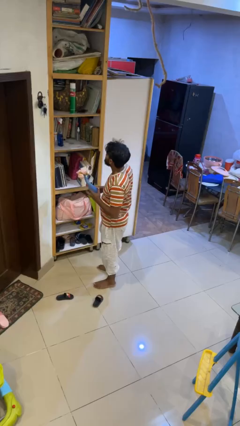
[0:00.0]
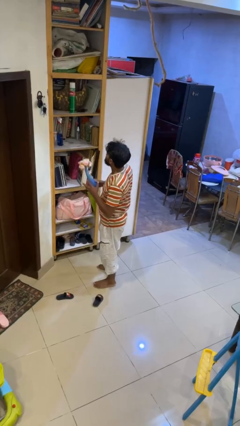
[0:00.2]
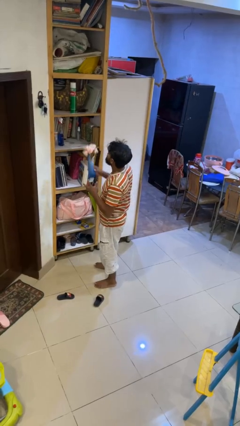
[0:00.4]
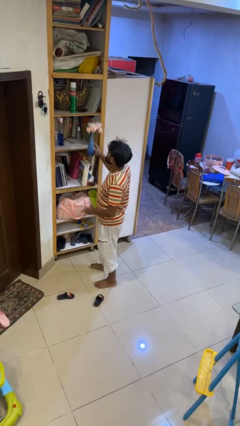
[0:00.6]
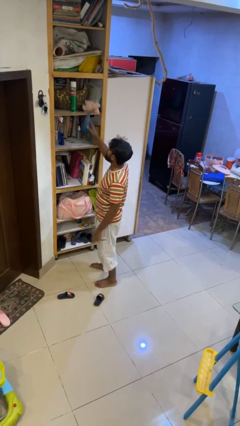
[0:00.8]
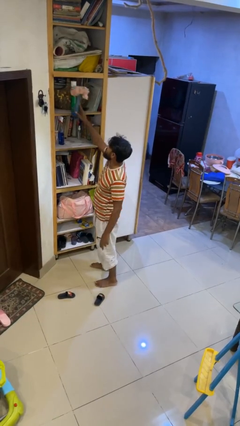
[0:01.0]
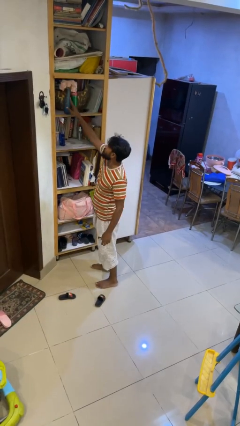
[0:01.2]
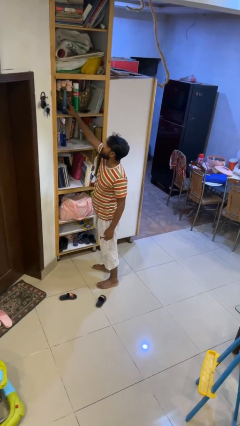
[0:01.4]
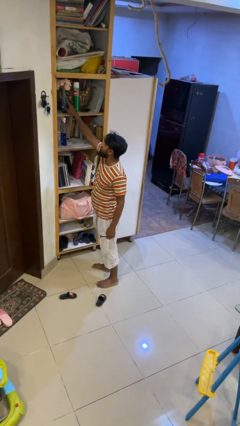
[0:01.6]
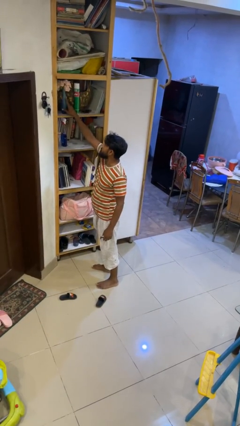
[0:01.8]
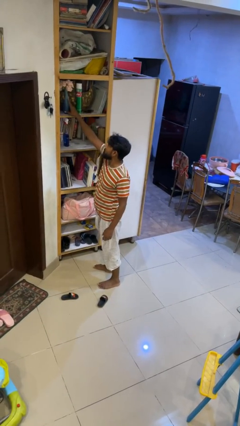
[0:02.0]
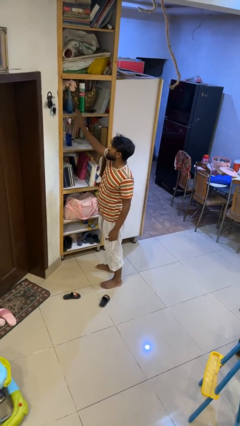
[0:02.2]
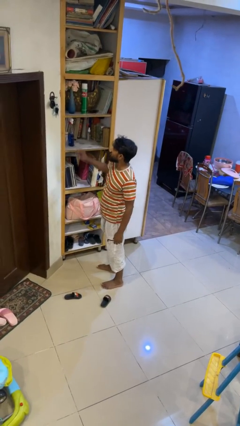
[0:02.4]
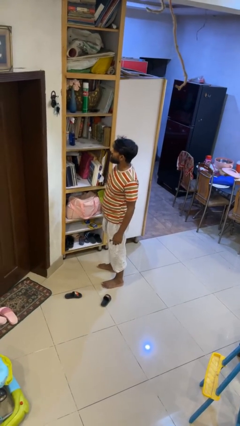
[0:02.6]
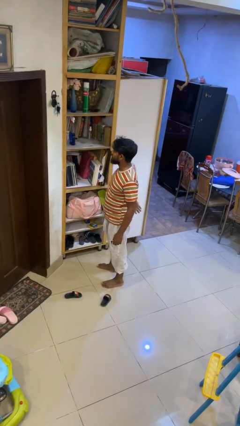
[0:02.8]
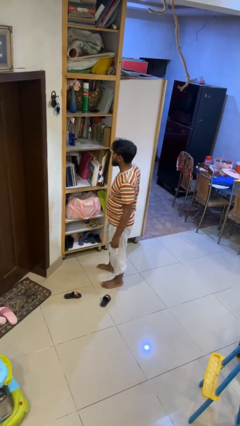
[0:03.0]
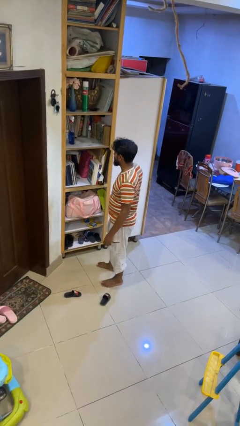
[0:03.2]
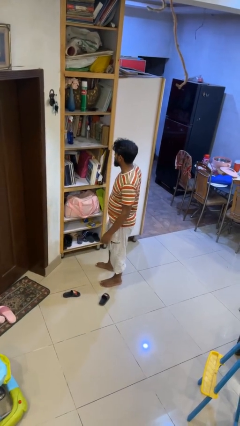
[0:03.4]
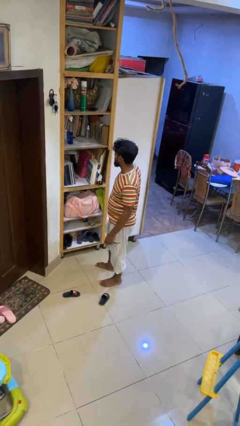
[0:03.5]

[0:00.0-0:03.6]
person puts down object on shelf

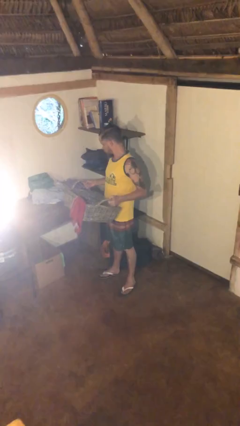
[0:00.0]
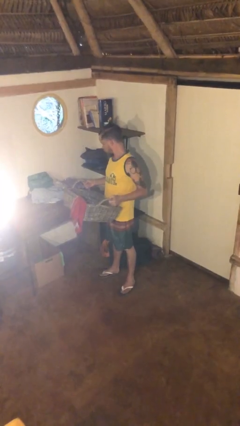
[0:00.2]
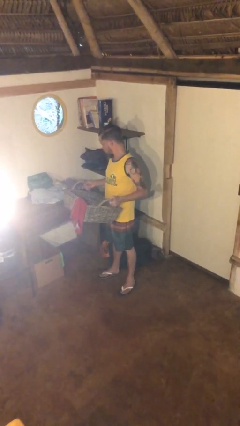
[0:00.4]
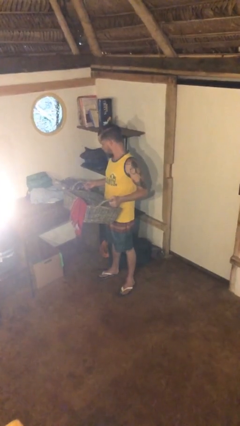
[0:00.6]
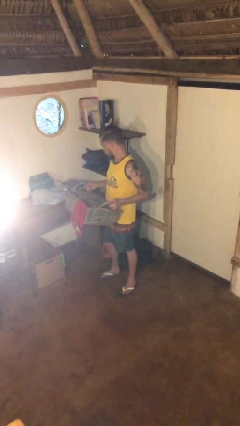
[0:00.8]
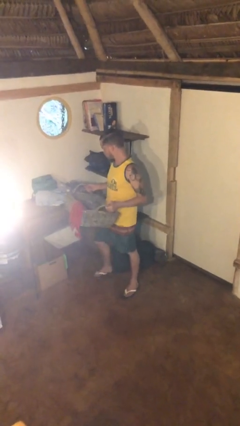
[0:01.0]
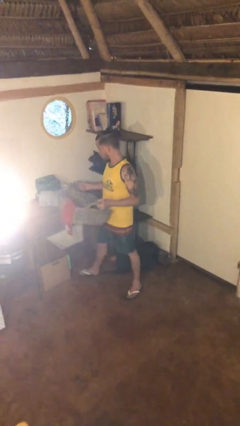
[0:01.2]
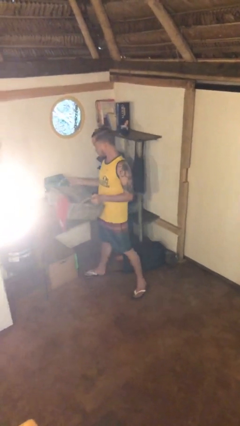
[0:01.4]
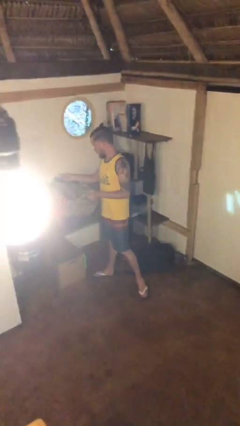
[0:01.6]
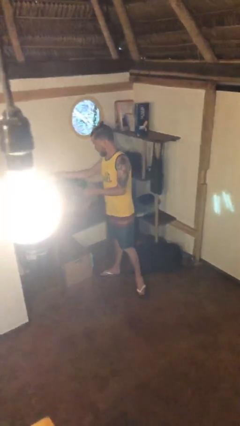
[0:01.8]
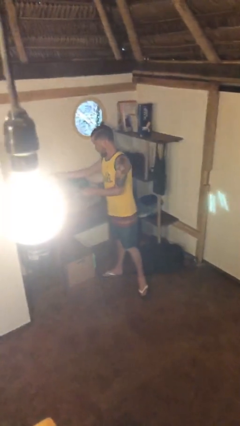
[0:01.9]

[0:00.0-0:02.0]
person puts down object on table

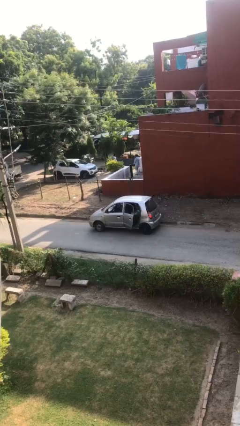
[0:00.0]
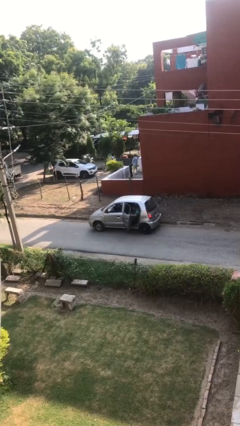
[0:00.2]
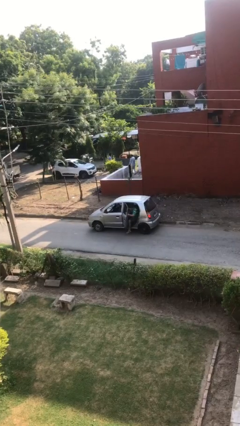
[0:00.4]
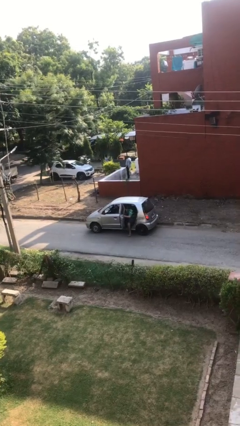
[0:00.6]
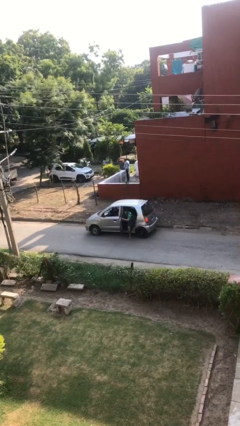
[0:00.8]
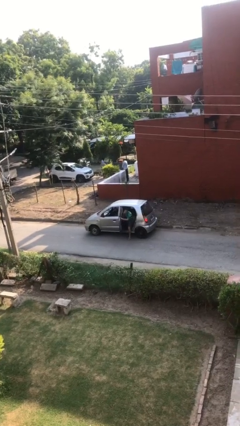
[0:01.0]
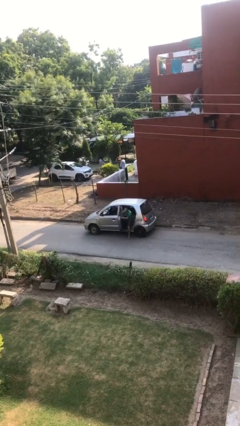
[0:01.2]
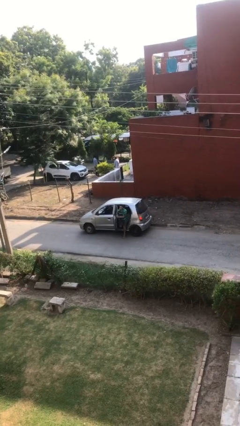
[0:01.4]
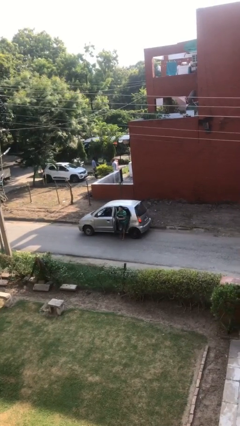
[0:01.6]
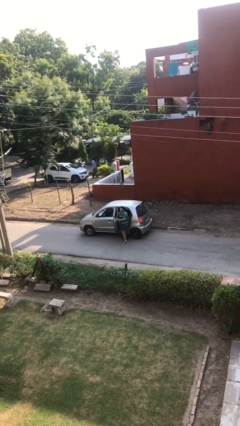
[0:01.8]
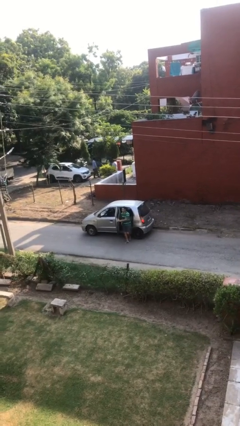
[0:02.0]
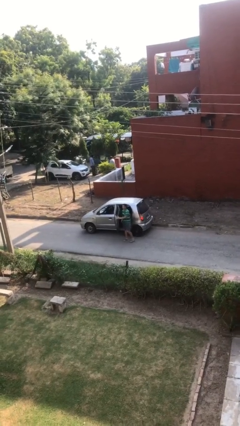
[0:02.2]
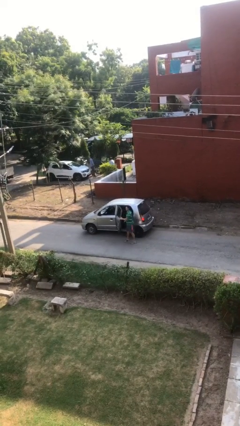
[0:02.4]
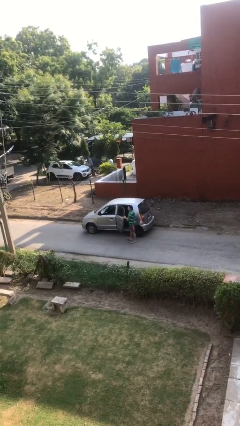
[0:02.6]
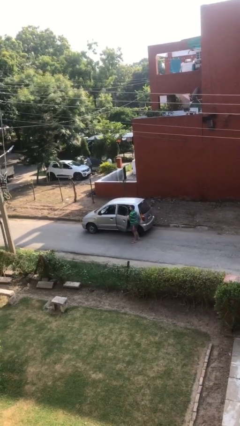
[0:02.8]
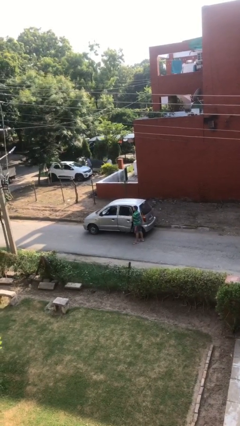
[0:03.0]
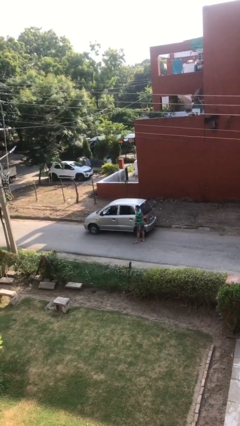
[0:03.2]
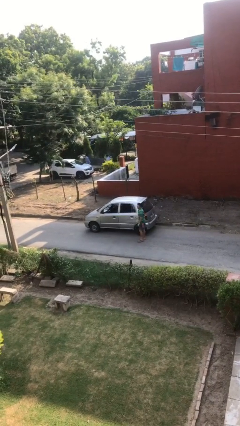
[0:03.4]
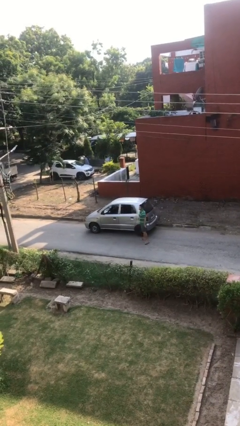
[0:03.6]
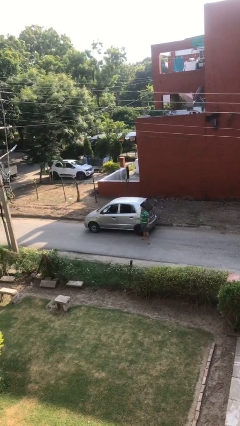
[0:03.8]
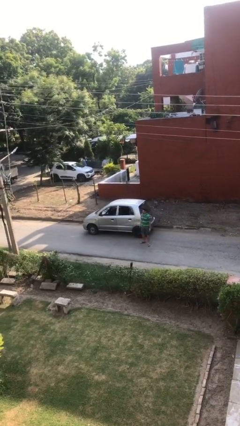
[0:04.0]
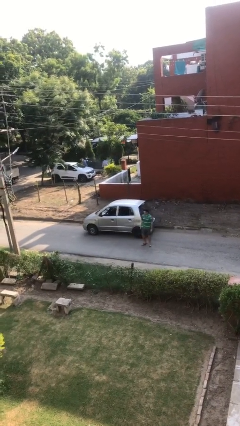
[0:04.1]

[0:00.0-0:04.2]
car drops off person

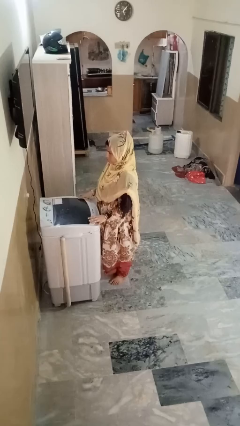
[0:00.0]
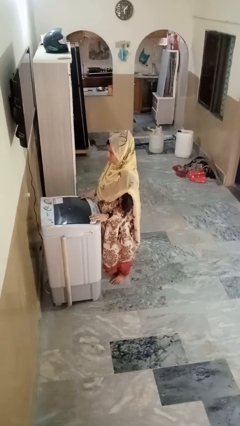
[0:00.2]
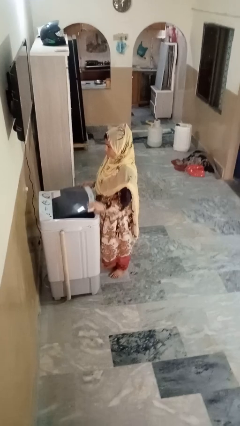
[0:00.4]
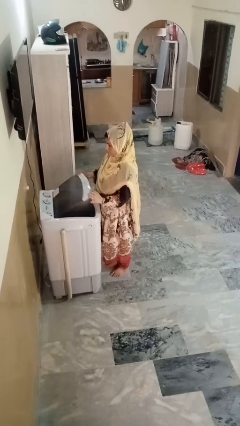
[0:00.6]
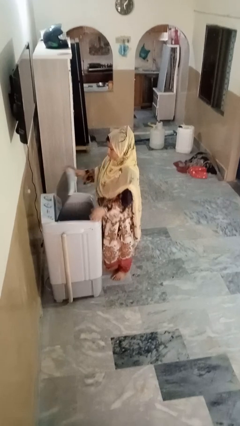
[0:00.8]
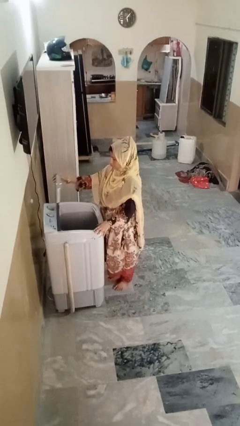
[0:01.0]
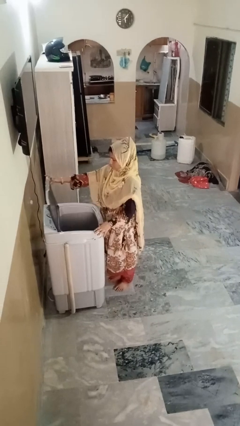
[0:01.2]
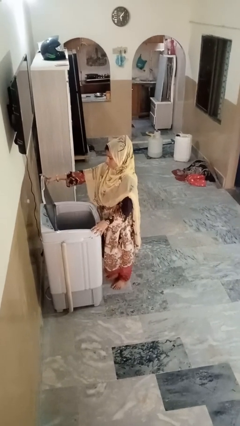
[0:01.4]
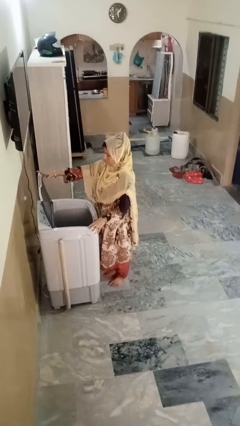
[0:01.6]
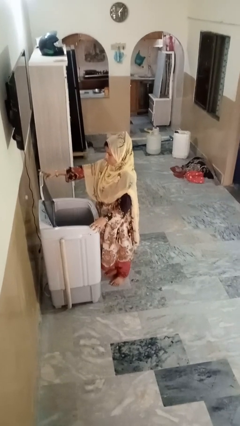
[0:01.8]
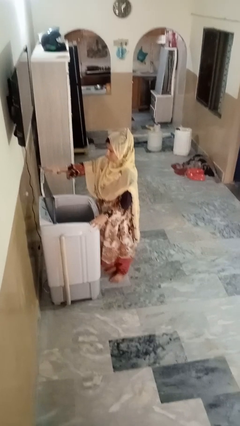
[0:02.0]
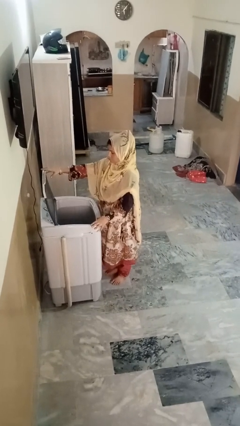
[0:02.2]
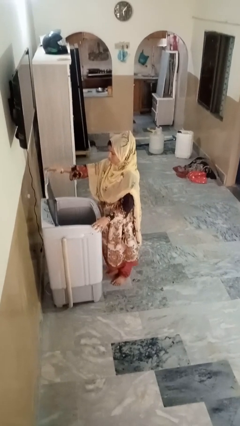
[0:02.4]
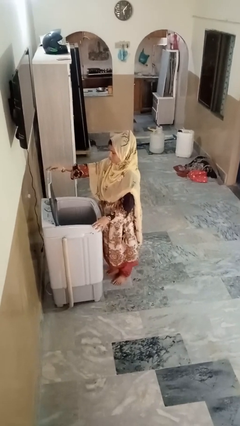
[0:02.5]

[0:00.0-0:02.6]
person opens clothes washer

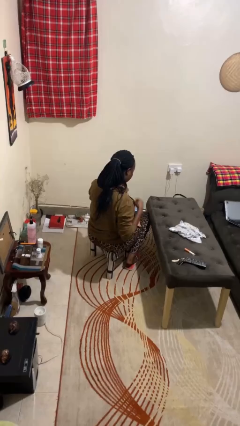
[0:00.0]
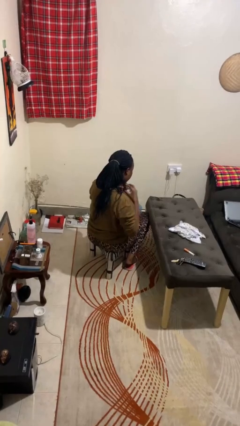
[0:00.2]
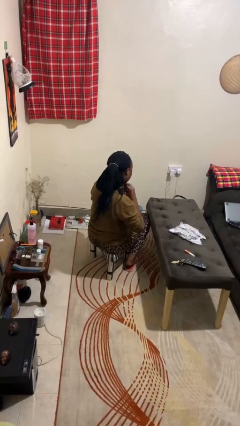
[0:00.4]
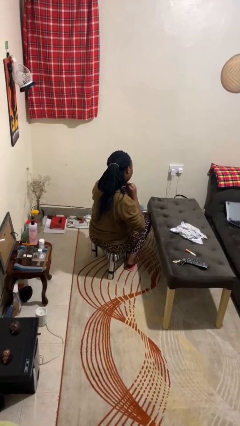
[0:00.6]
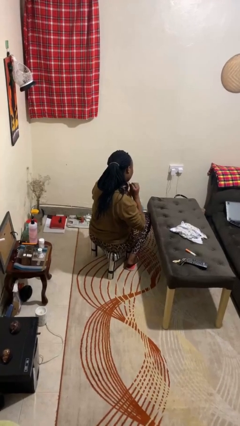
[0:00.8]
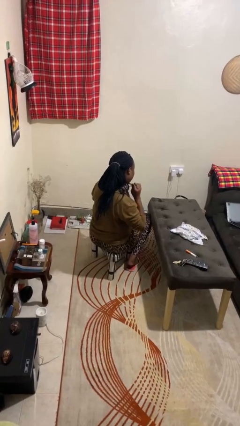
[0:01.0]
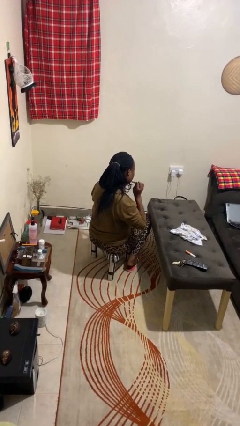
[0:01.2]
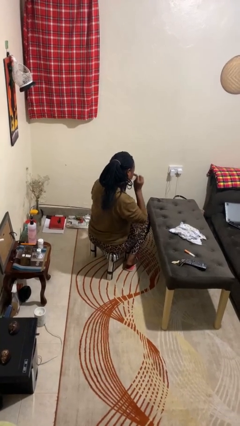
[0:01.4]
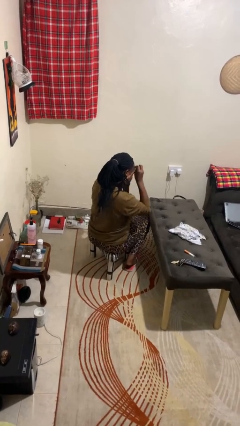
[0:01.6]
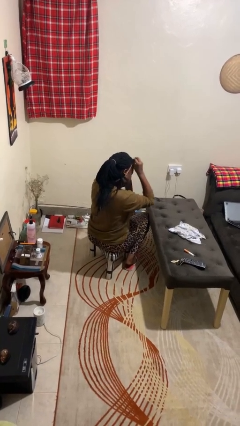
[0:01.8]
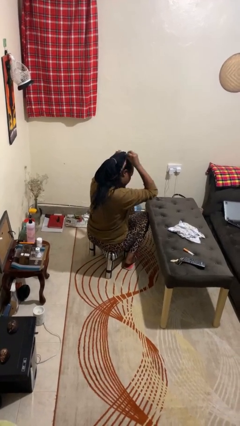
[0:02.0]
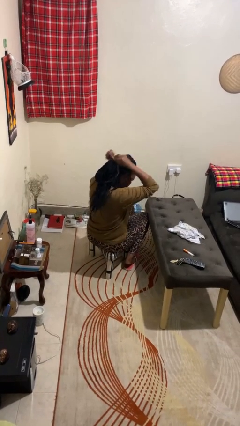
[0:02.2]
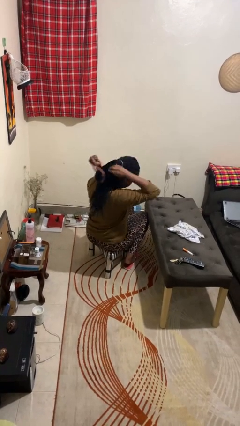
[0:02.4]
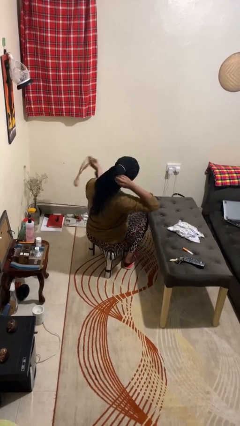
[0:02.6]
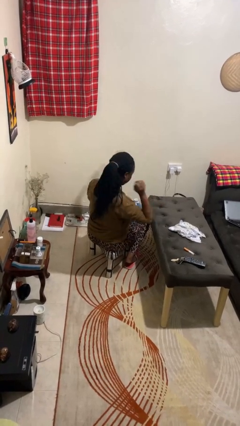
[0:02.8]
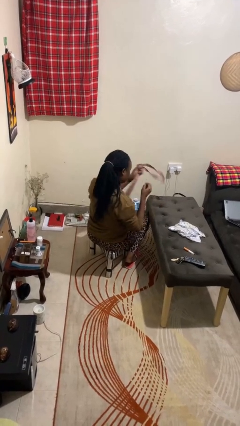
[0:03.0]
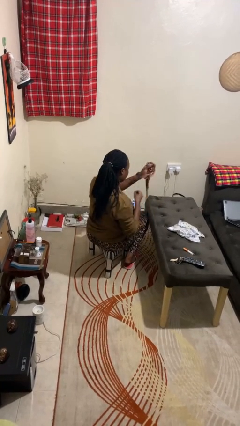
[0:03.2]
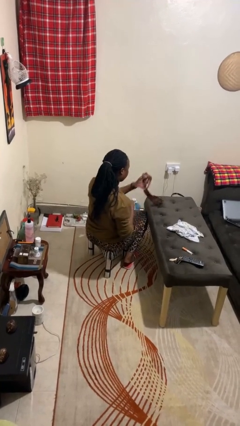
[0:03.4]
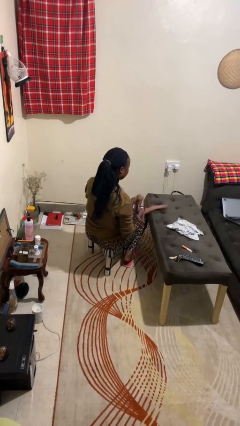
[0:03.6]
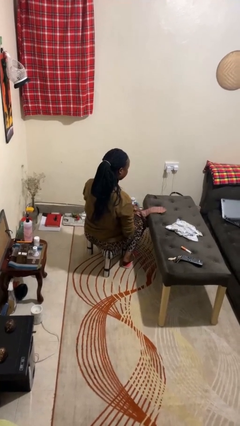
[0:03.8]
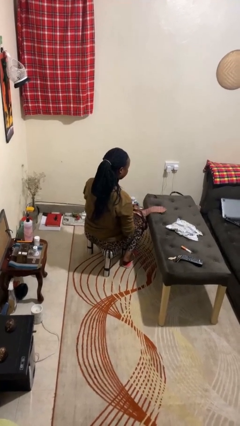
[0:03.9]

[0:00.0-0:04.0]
person takes off necktie

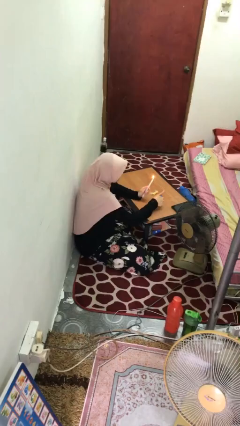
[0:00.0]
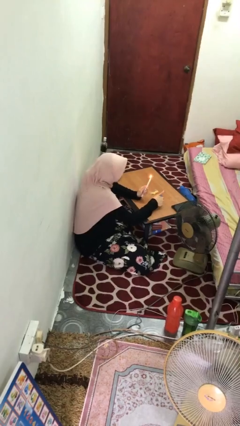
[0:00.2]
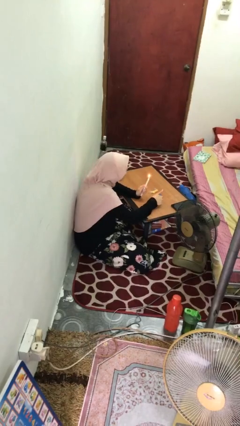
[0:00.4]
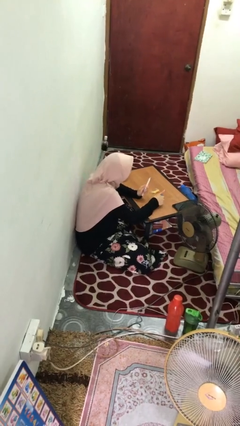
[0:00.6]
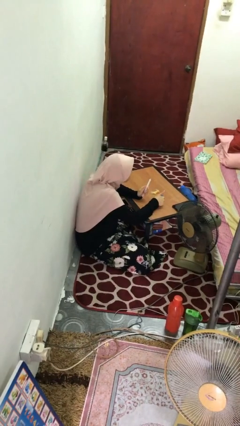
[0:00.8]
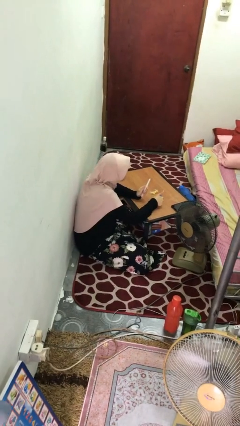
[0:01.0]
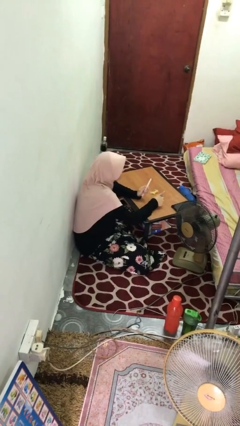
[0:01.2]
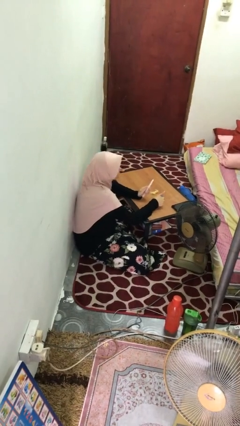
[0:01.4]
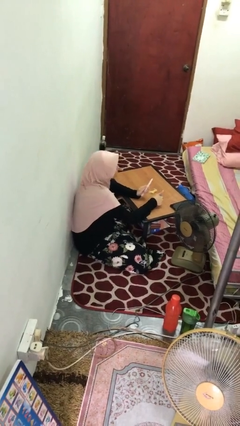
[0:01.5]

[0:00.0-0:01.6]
person extinguishes candle
